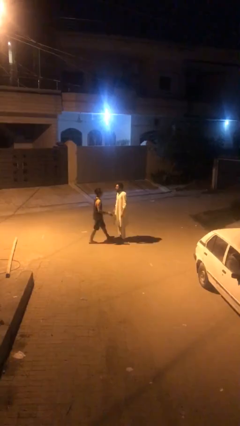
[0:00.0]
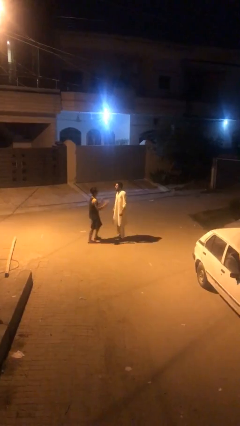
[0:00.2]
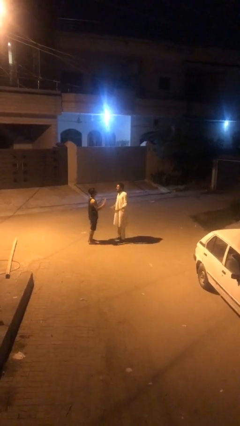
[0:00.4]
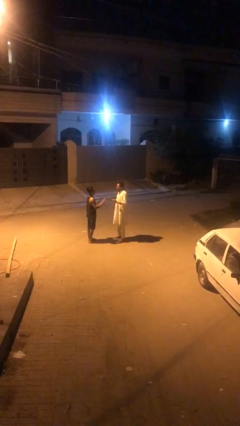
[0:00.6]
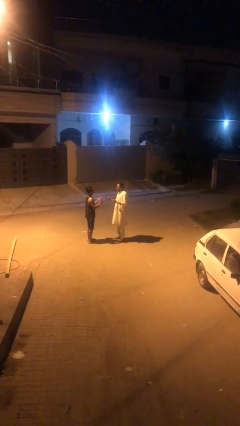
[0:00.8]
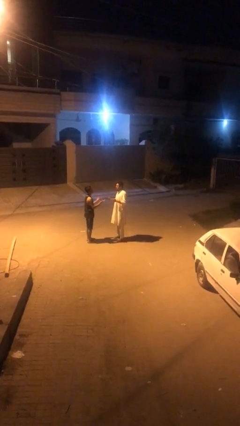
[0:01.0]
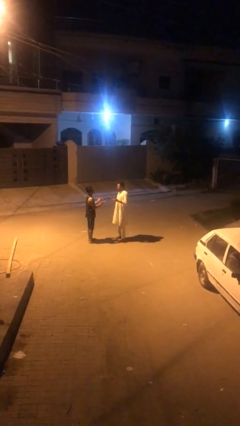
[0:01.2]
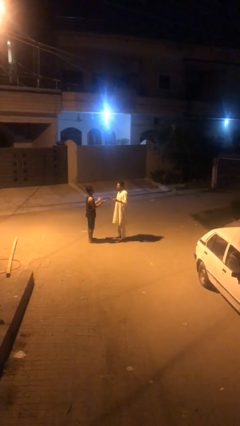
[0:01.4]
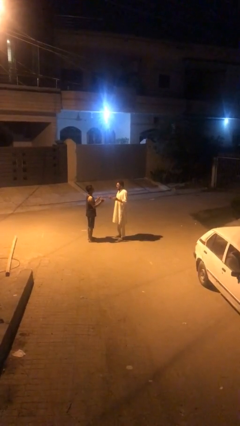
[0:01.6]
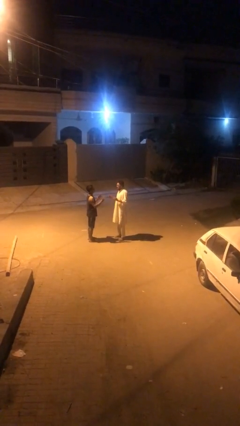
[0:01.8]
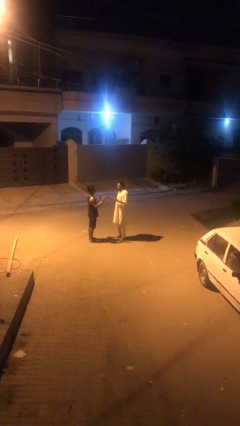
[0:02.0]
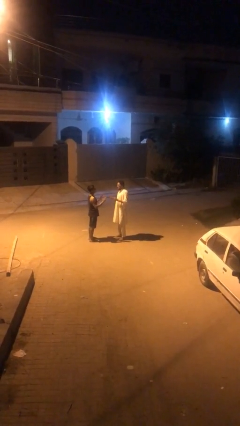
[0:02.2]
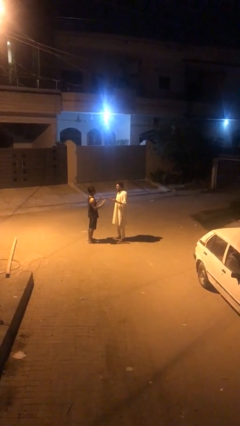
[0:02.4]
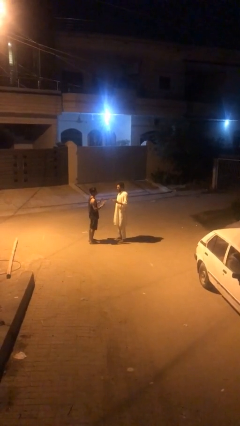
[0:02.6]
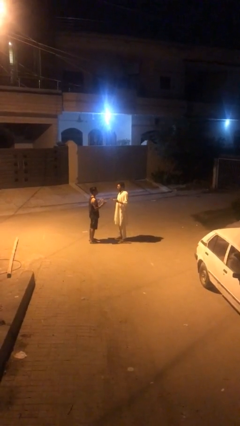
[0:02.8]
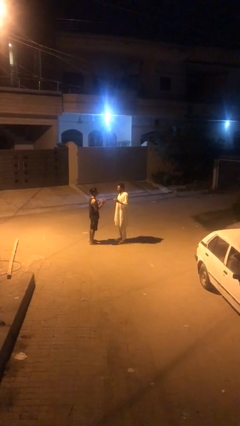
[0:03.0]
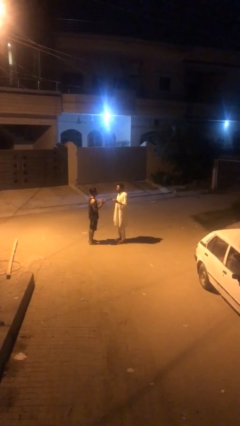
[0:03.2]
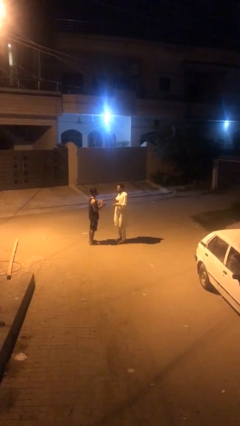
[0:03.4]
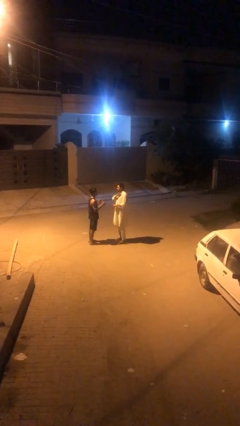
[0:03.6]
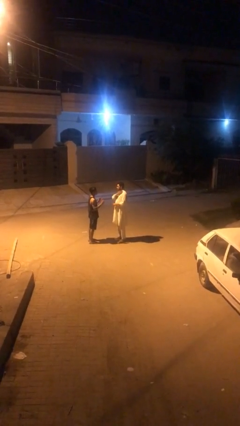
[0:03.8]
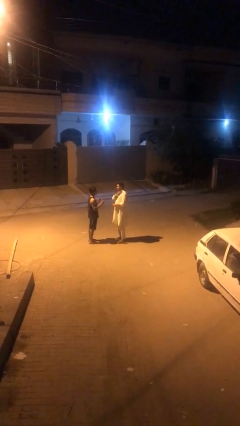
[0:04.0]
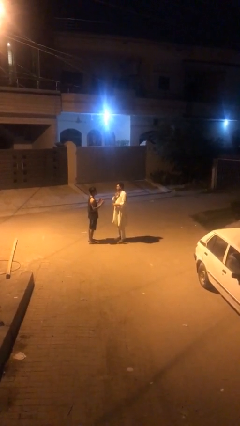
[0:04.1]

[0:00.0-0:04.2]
person talks to person

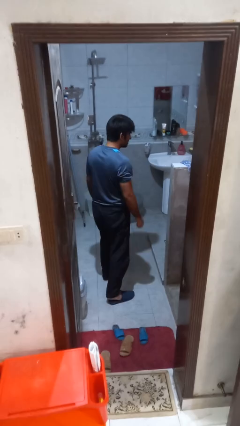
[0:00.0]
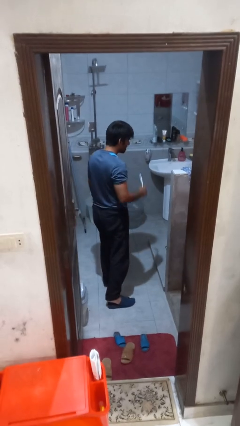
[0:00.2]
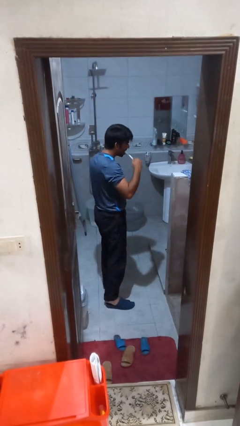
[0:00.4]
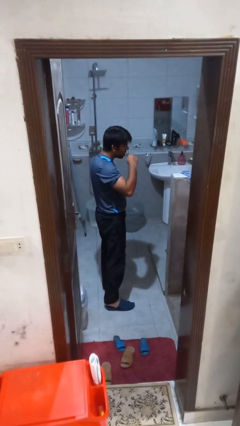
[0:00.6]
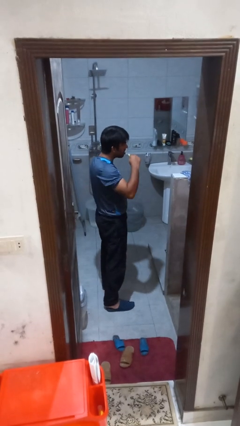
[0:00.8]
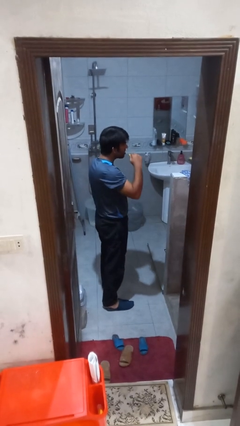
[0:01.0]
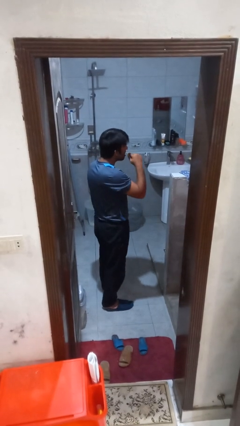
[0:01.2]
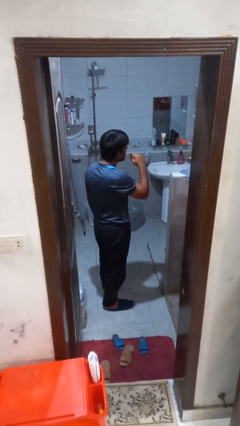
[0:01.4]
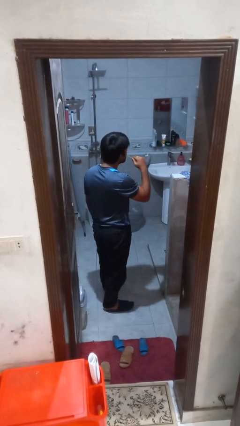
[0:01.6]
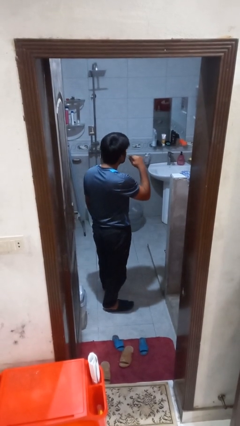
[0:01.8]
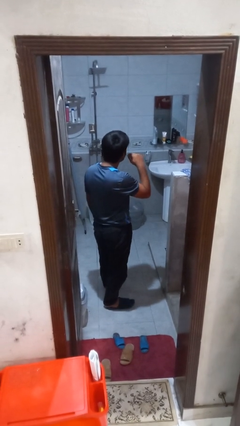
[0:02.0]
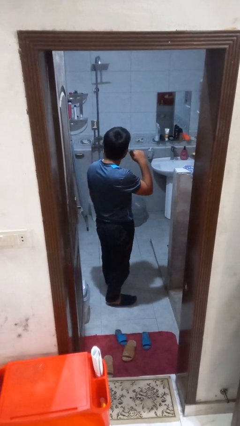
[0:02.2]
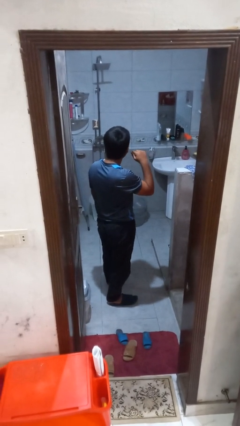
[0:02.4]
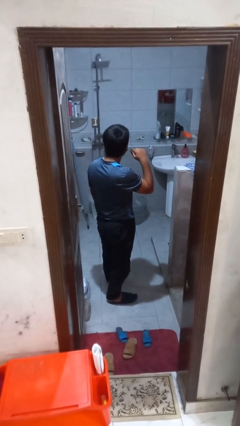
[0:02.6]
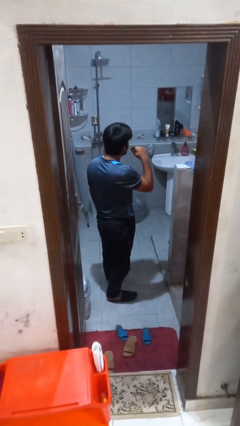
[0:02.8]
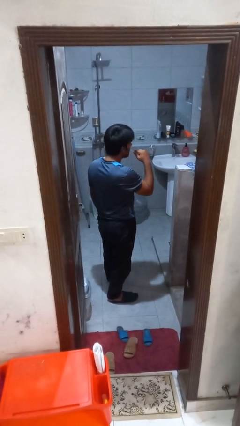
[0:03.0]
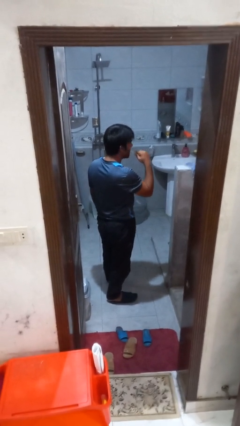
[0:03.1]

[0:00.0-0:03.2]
person brushes teeth

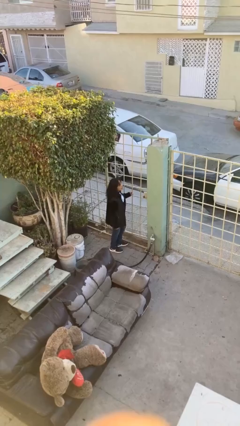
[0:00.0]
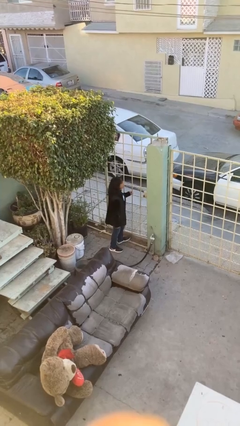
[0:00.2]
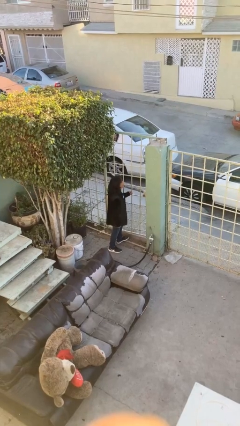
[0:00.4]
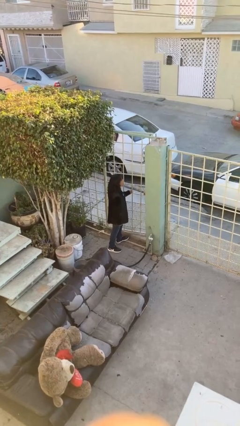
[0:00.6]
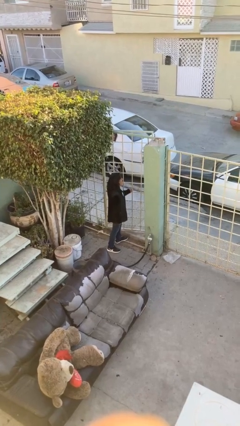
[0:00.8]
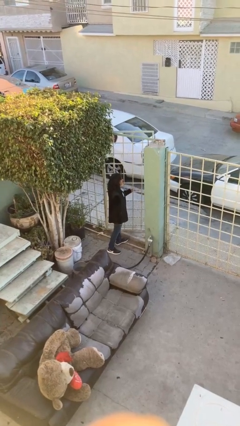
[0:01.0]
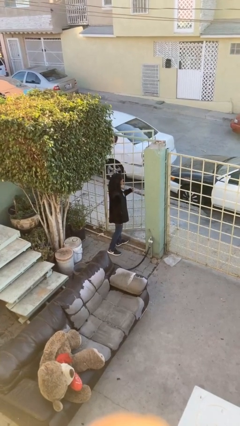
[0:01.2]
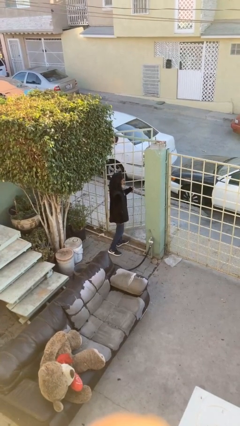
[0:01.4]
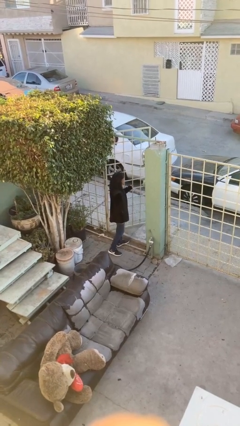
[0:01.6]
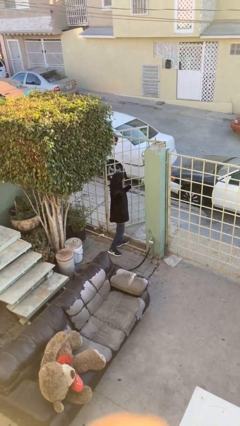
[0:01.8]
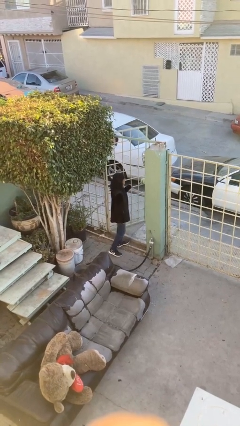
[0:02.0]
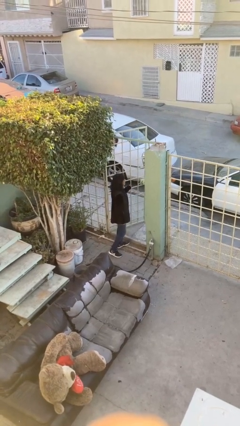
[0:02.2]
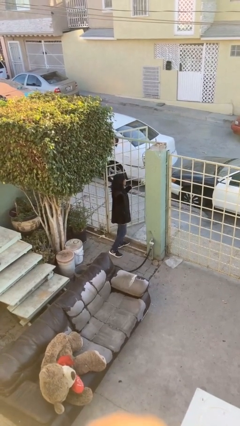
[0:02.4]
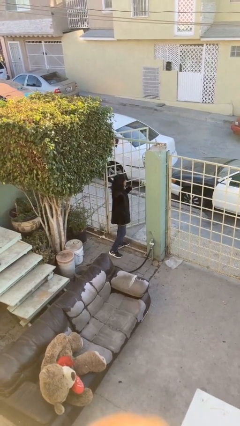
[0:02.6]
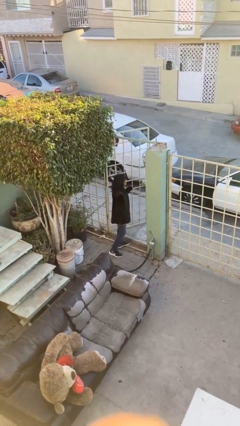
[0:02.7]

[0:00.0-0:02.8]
person opens facility door

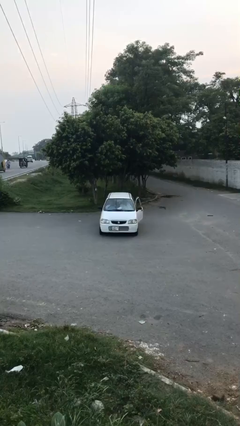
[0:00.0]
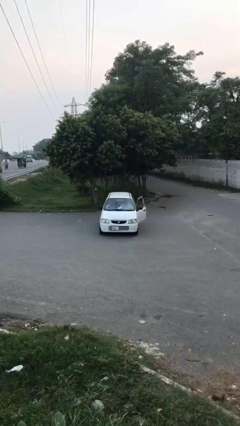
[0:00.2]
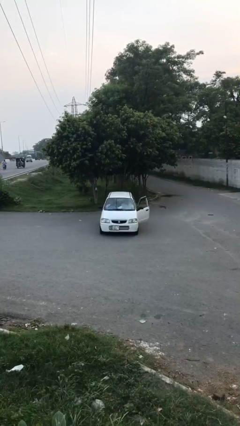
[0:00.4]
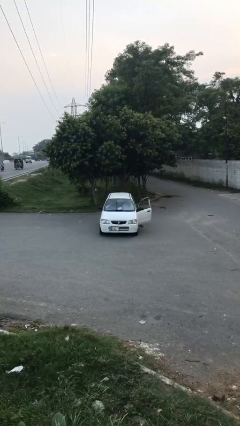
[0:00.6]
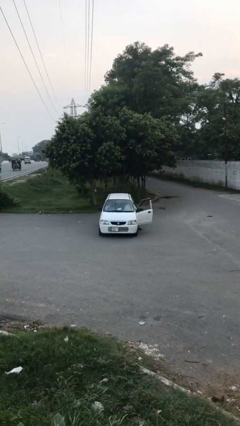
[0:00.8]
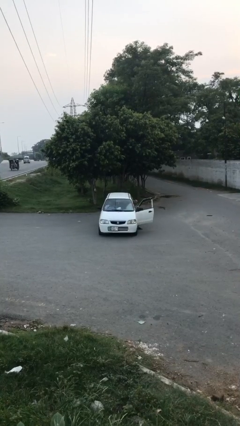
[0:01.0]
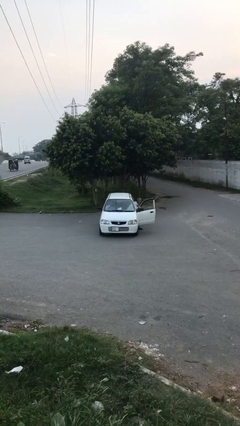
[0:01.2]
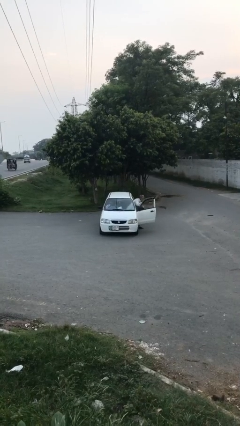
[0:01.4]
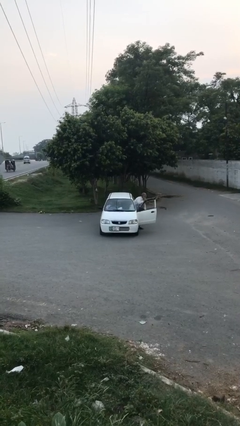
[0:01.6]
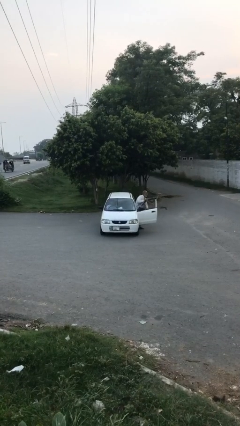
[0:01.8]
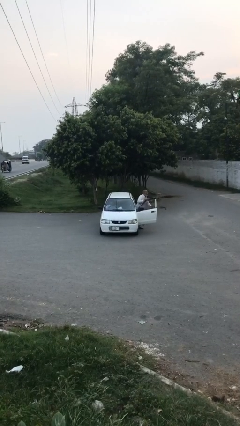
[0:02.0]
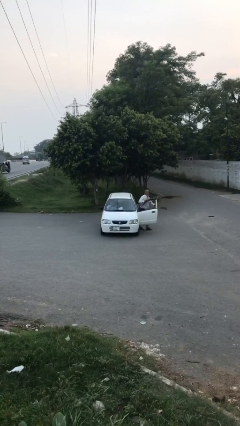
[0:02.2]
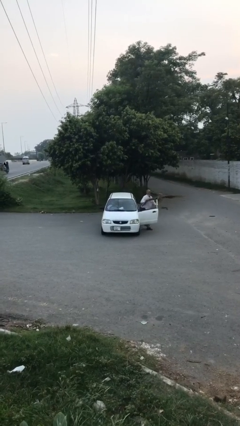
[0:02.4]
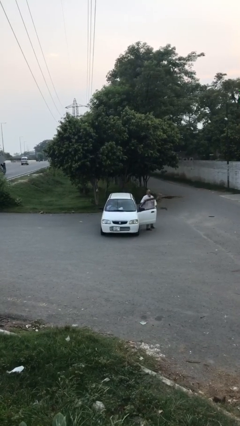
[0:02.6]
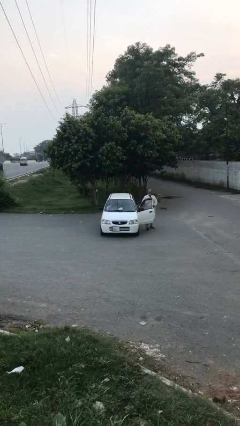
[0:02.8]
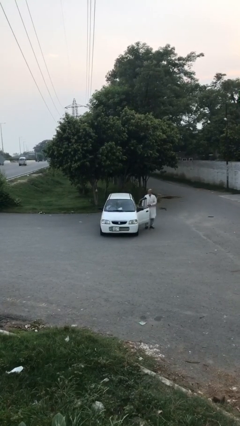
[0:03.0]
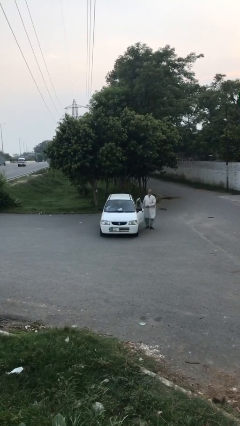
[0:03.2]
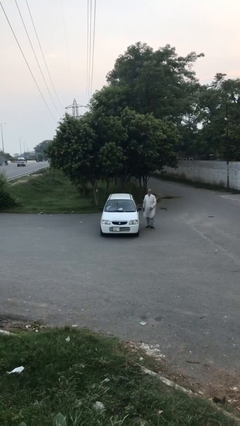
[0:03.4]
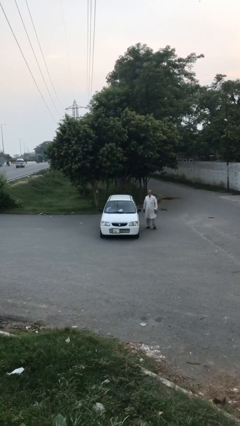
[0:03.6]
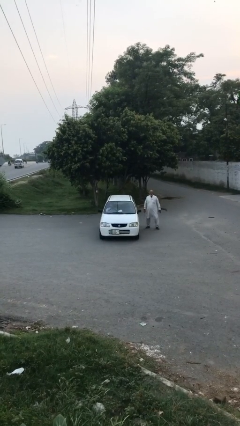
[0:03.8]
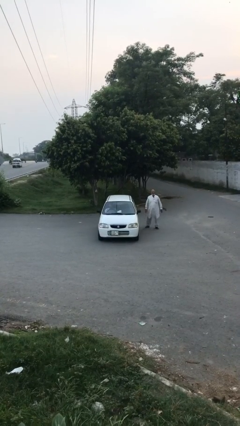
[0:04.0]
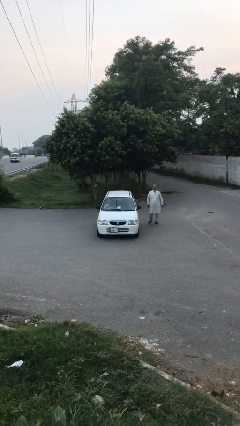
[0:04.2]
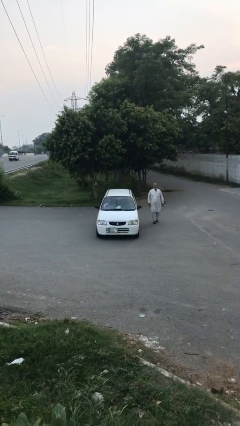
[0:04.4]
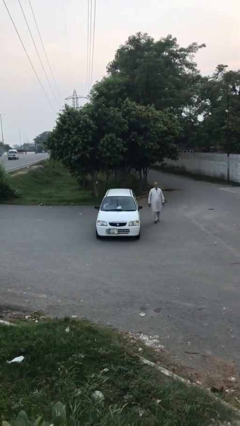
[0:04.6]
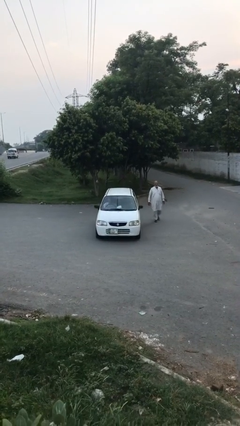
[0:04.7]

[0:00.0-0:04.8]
car drops off person

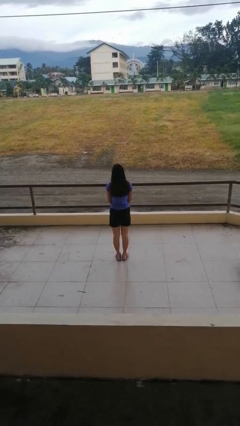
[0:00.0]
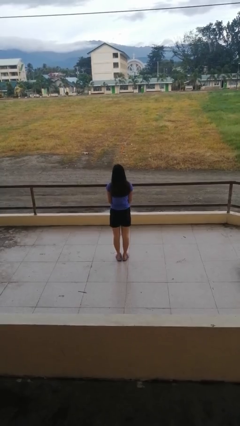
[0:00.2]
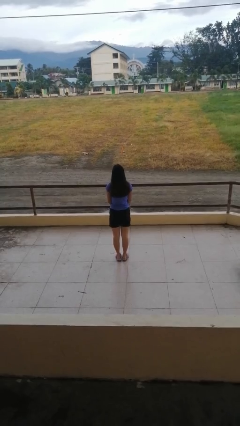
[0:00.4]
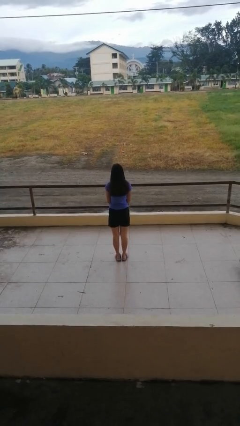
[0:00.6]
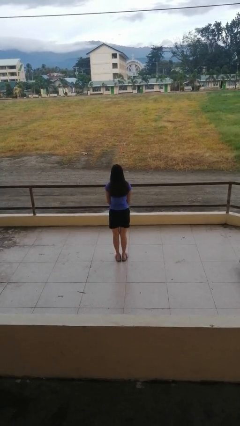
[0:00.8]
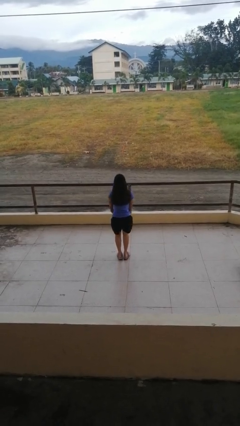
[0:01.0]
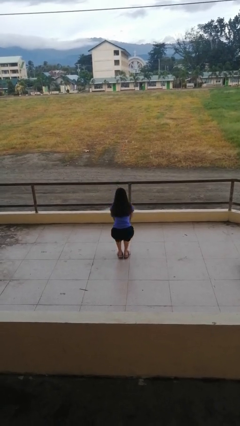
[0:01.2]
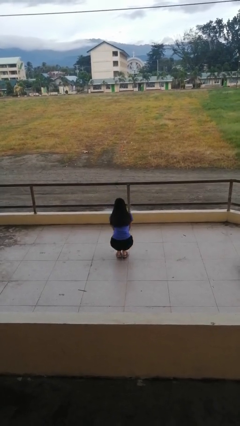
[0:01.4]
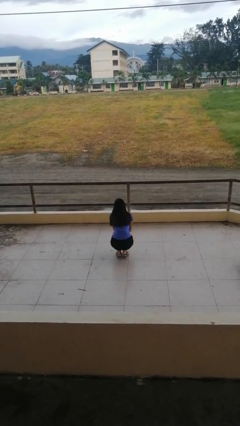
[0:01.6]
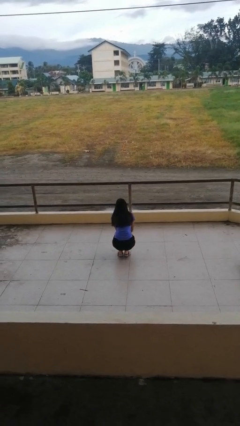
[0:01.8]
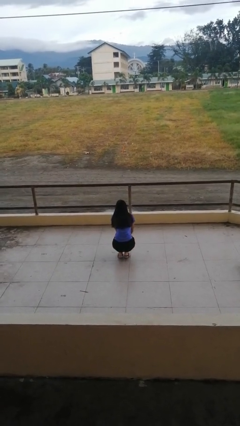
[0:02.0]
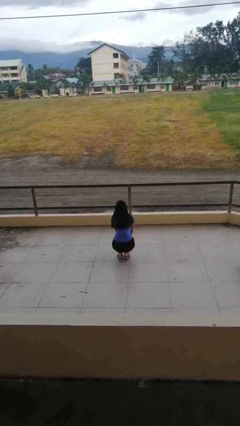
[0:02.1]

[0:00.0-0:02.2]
person squats

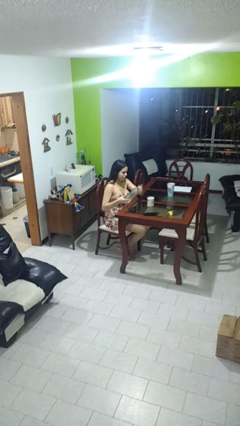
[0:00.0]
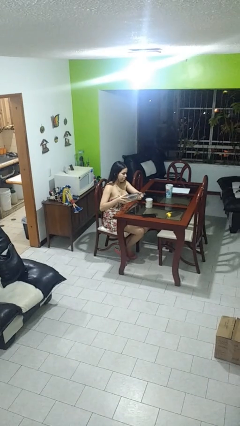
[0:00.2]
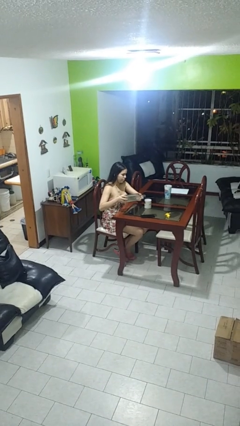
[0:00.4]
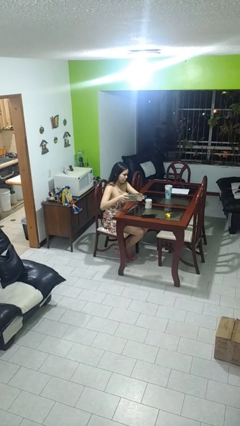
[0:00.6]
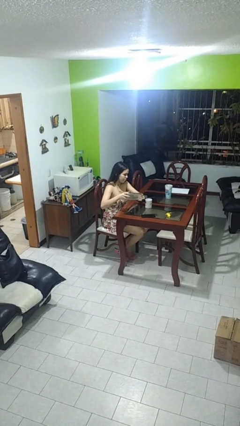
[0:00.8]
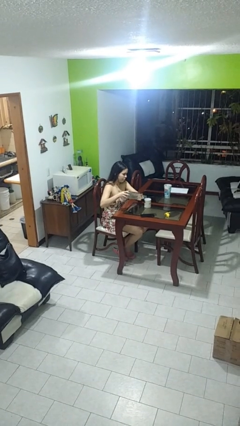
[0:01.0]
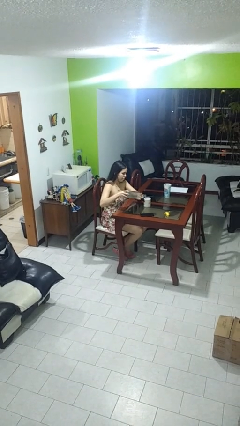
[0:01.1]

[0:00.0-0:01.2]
person pours liquid into cup
